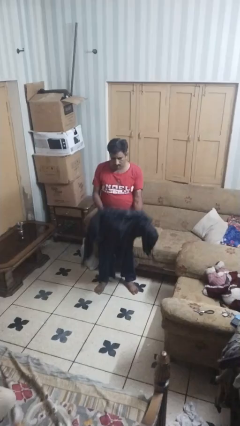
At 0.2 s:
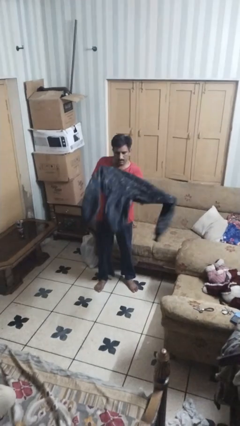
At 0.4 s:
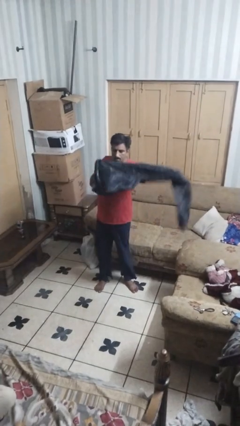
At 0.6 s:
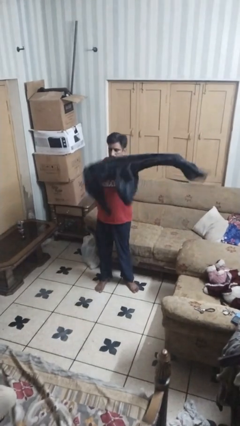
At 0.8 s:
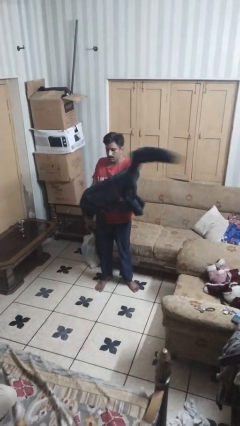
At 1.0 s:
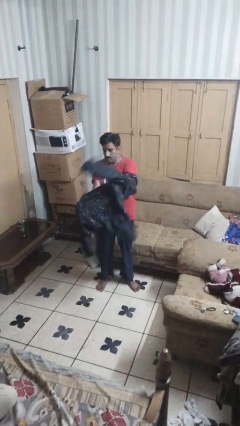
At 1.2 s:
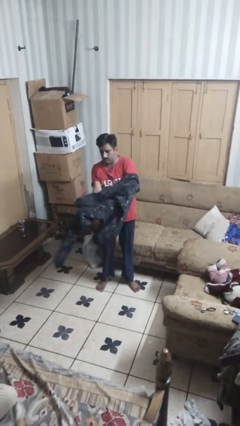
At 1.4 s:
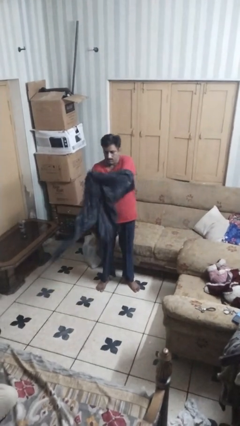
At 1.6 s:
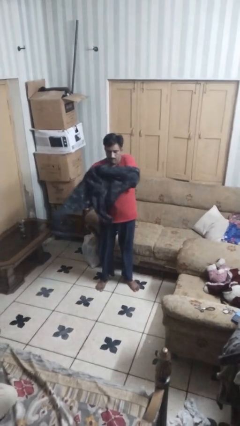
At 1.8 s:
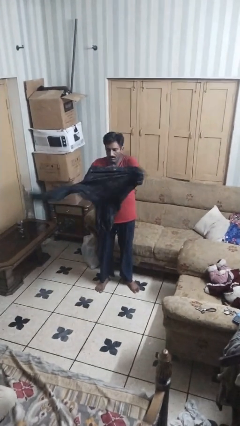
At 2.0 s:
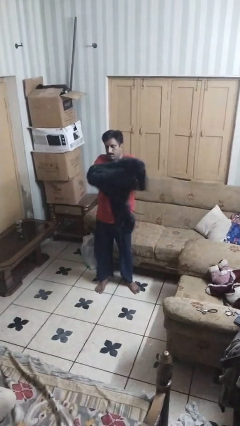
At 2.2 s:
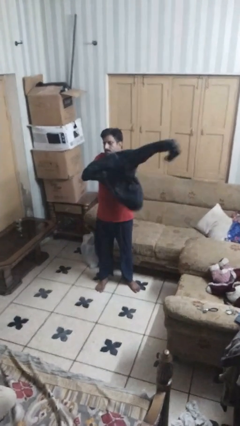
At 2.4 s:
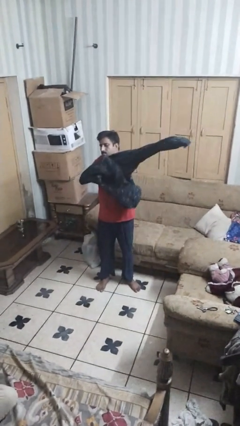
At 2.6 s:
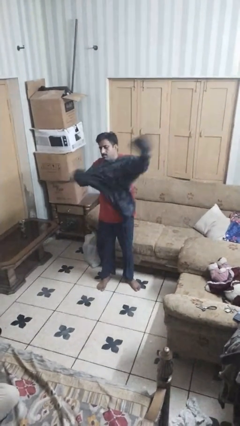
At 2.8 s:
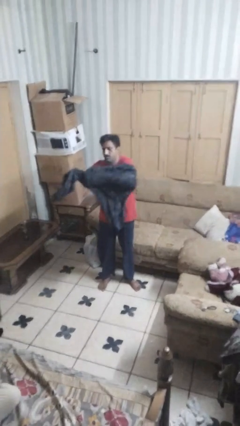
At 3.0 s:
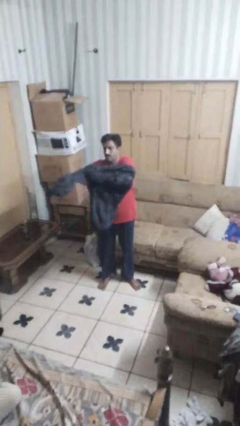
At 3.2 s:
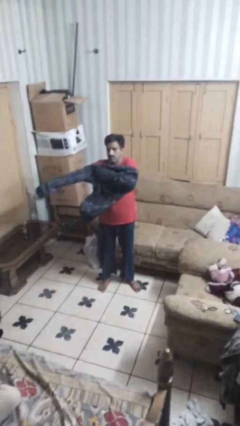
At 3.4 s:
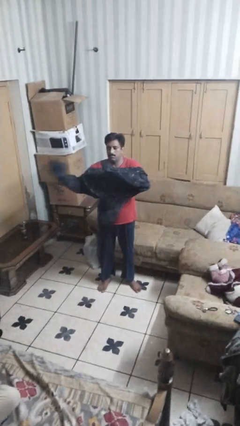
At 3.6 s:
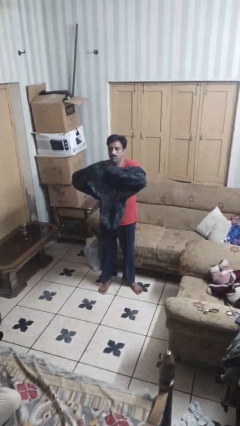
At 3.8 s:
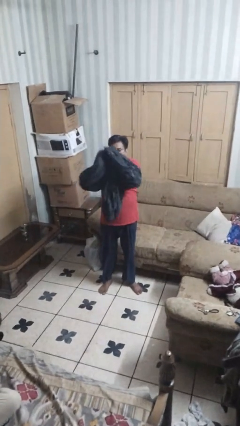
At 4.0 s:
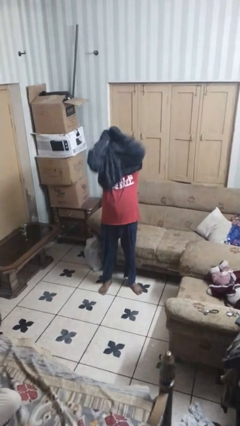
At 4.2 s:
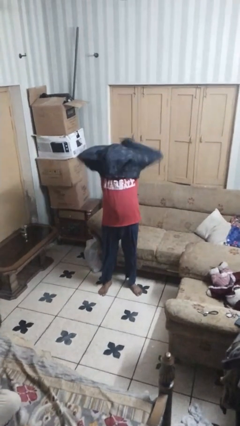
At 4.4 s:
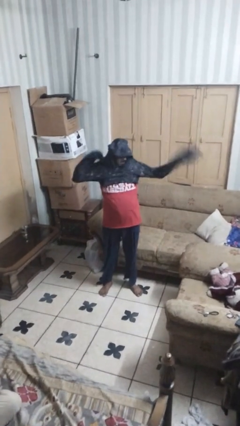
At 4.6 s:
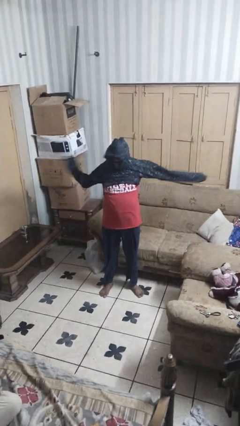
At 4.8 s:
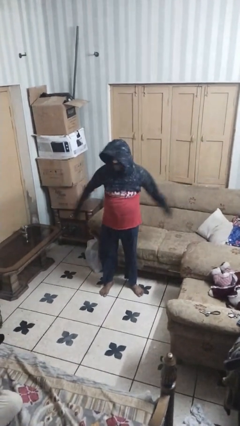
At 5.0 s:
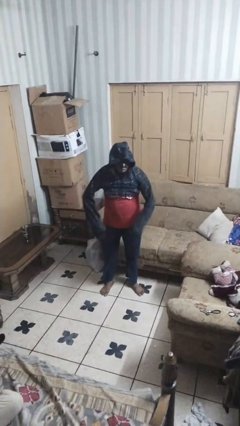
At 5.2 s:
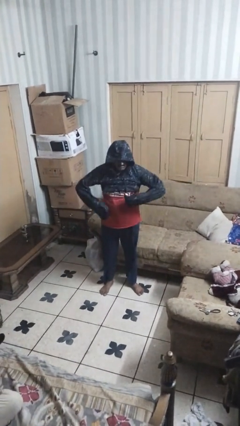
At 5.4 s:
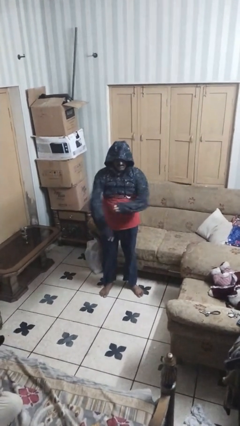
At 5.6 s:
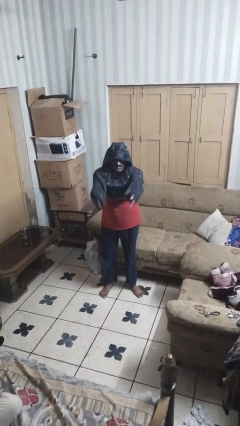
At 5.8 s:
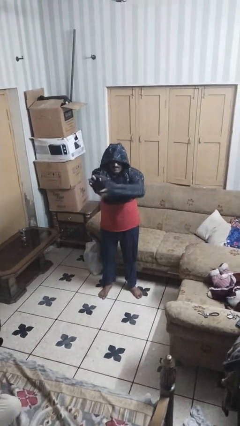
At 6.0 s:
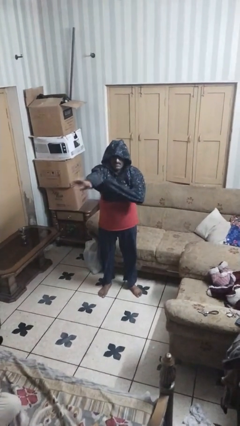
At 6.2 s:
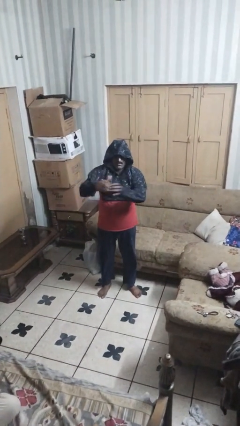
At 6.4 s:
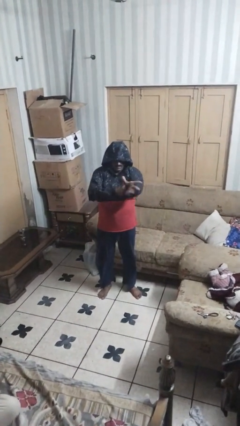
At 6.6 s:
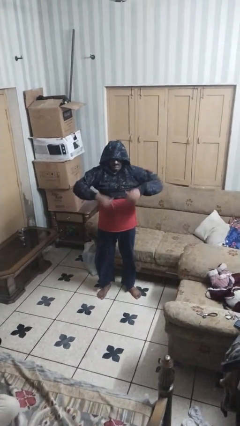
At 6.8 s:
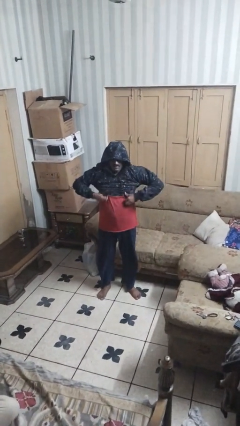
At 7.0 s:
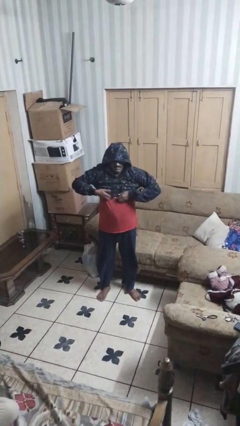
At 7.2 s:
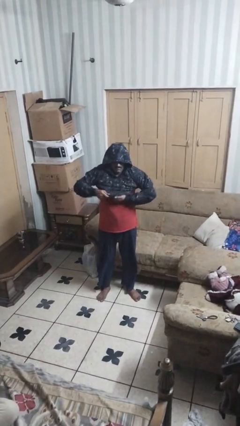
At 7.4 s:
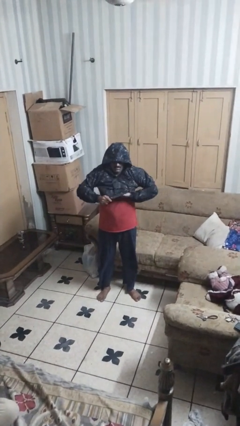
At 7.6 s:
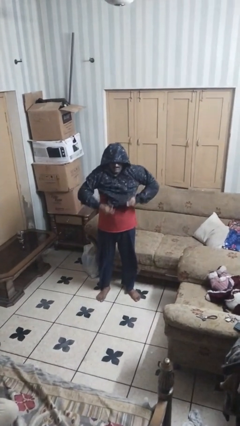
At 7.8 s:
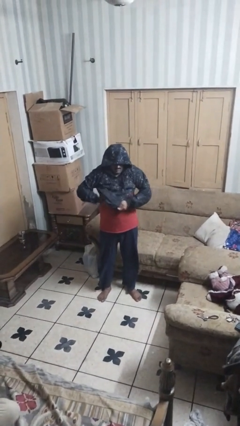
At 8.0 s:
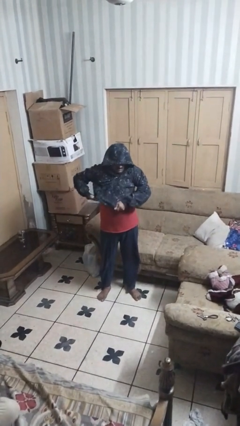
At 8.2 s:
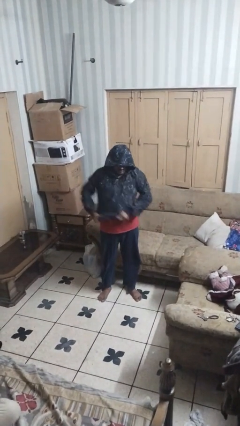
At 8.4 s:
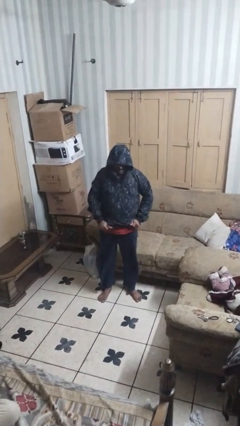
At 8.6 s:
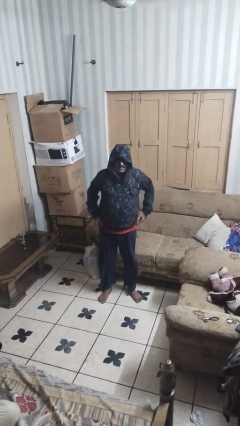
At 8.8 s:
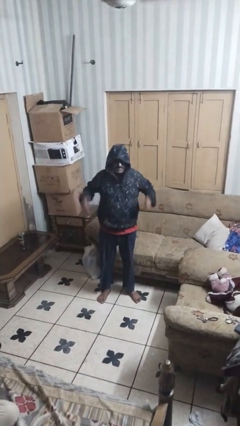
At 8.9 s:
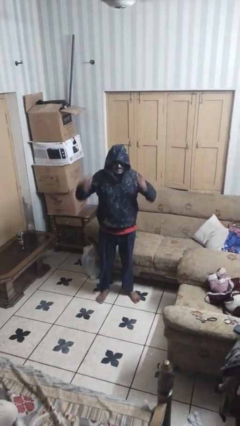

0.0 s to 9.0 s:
person puts on hoodie

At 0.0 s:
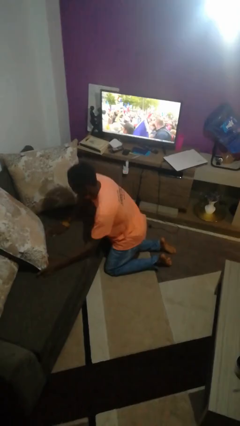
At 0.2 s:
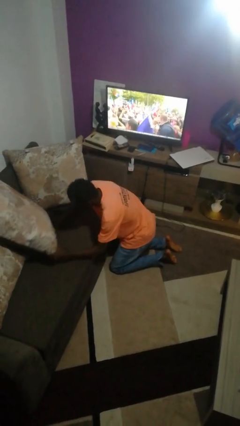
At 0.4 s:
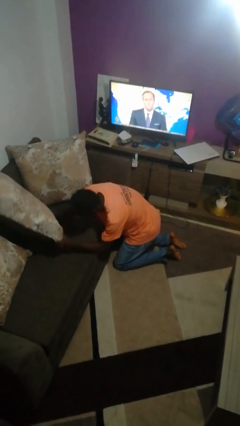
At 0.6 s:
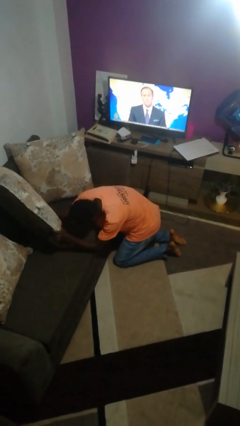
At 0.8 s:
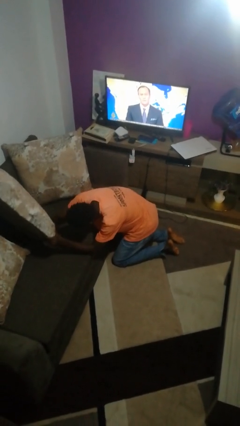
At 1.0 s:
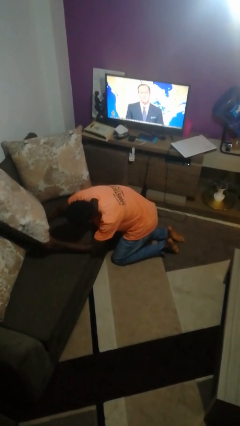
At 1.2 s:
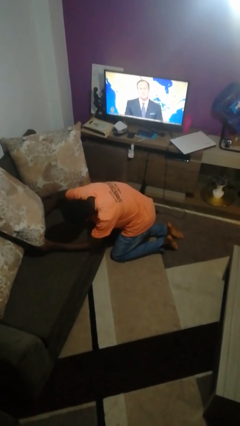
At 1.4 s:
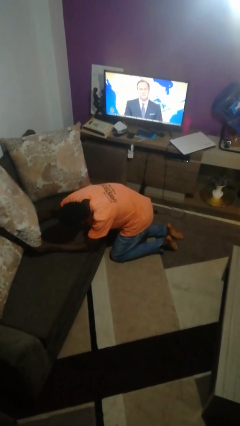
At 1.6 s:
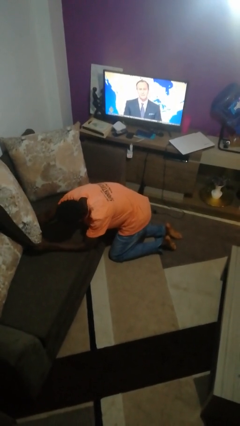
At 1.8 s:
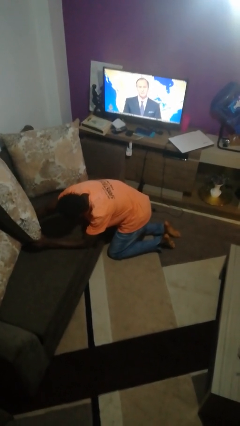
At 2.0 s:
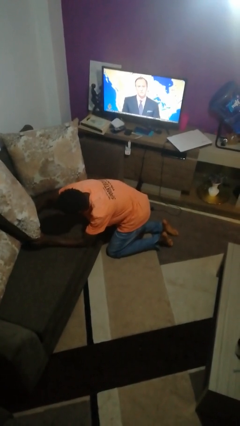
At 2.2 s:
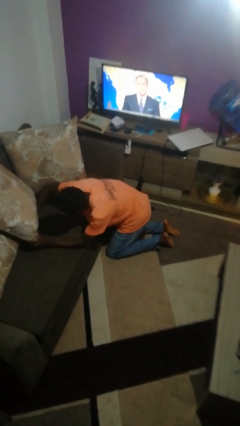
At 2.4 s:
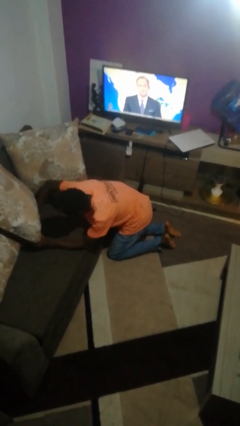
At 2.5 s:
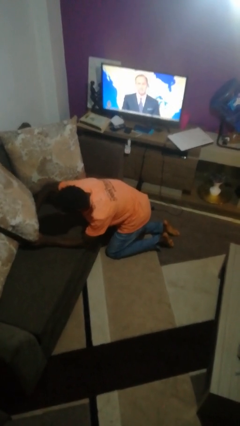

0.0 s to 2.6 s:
person searches in couch

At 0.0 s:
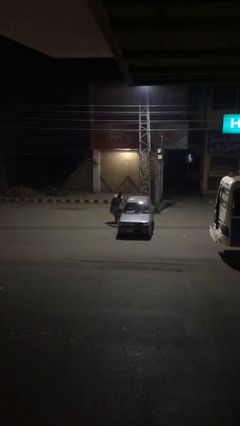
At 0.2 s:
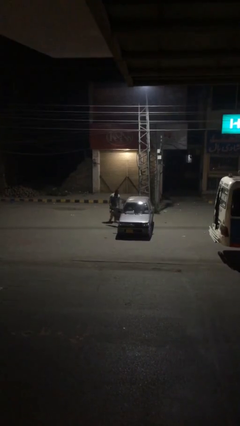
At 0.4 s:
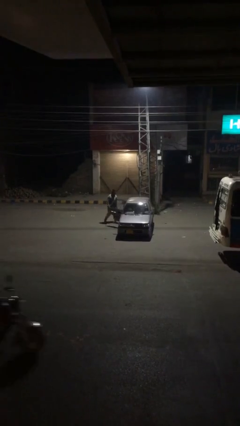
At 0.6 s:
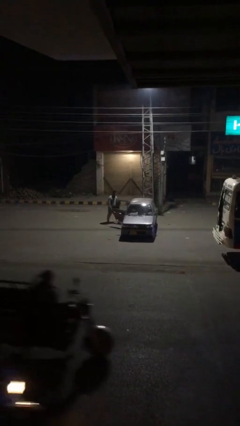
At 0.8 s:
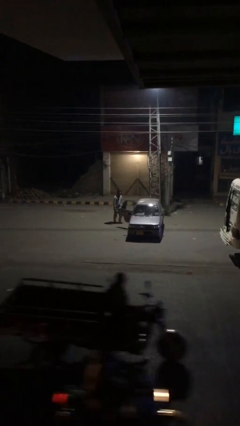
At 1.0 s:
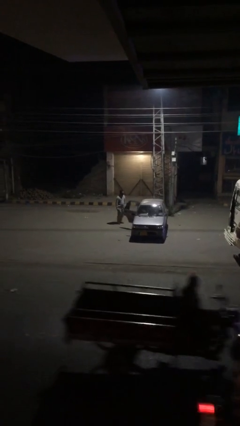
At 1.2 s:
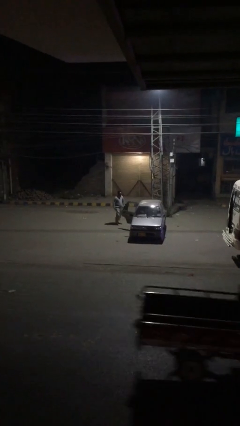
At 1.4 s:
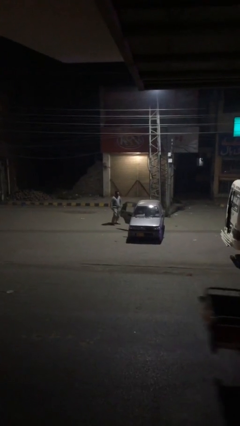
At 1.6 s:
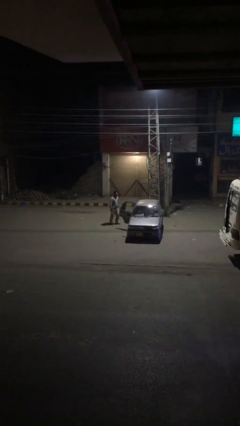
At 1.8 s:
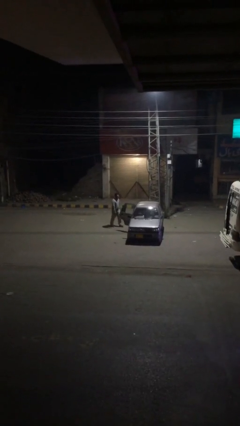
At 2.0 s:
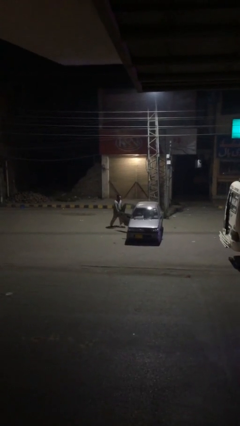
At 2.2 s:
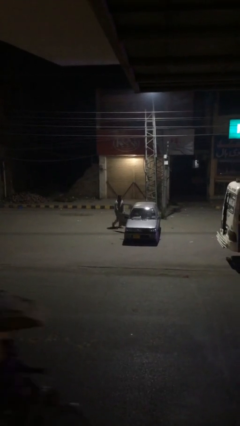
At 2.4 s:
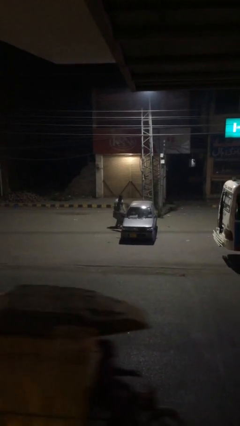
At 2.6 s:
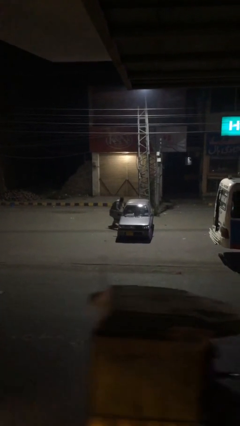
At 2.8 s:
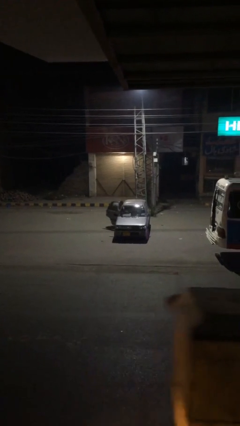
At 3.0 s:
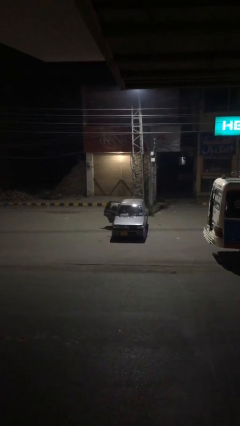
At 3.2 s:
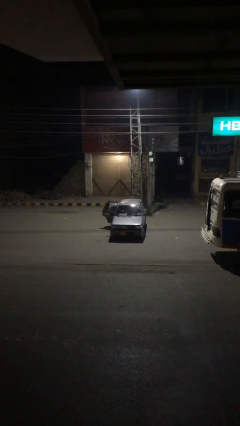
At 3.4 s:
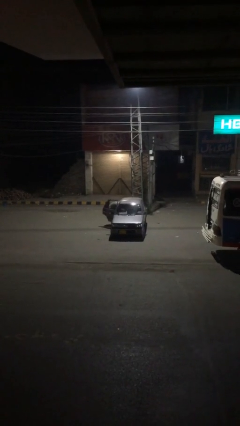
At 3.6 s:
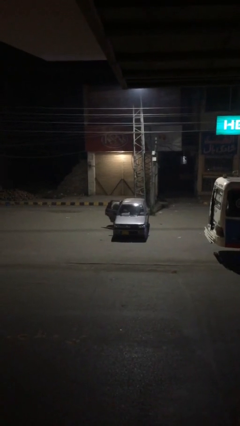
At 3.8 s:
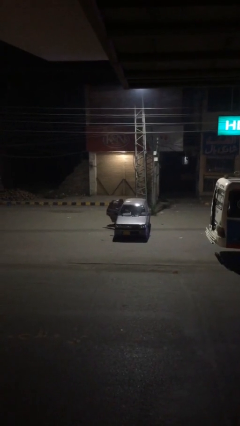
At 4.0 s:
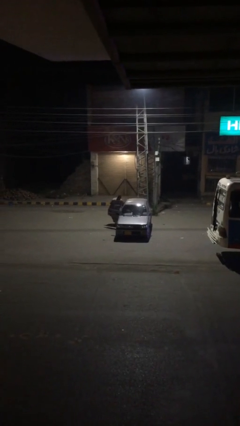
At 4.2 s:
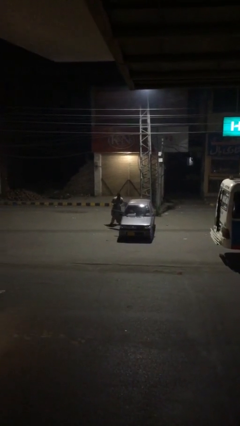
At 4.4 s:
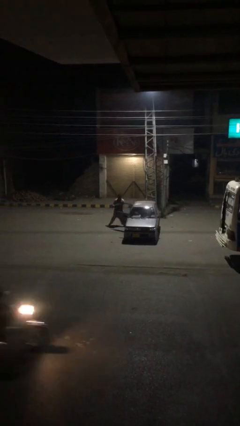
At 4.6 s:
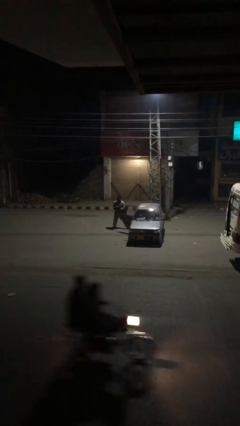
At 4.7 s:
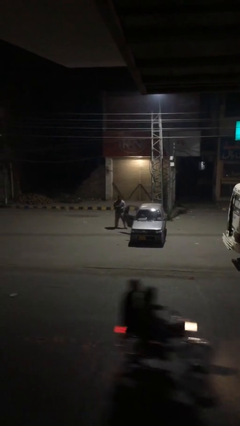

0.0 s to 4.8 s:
person unloads car

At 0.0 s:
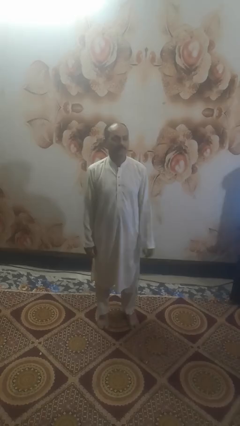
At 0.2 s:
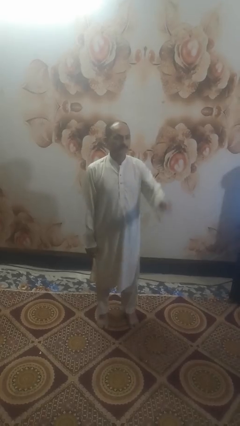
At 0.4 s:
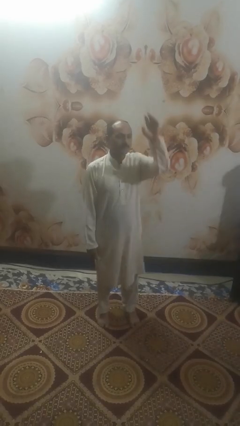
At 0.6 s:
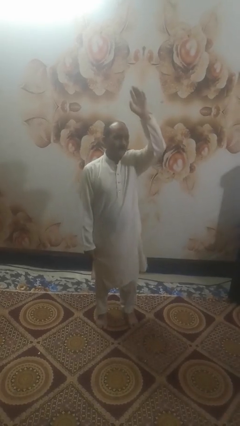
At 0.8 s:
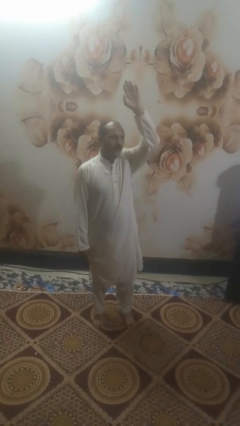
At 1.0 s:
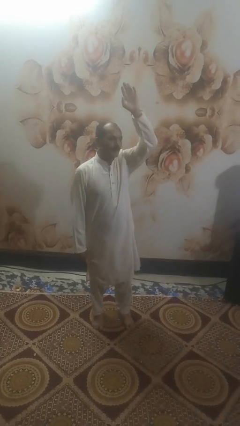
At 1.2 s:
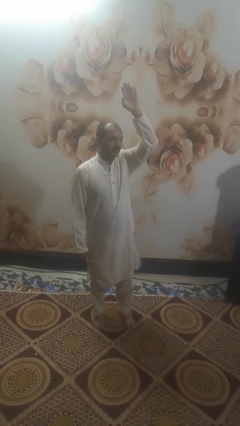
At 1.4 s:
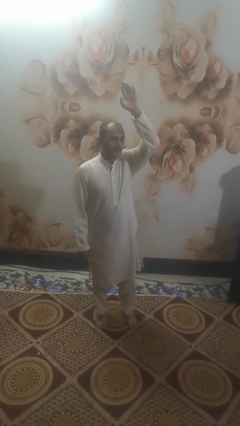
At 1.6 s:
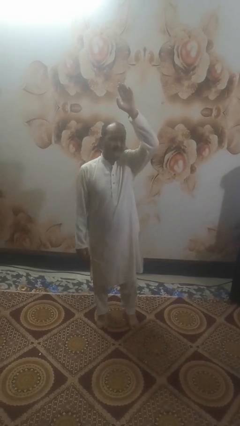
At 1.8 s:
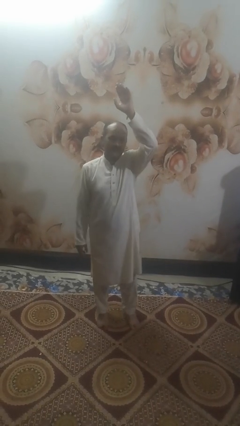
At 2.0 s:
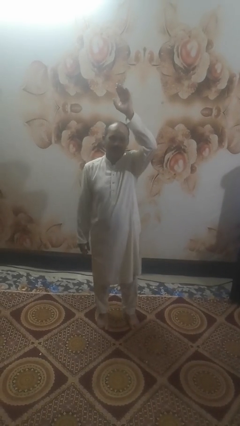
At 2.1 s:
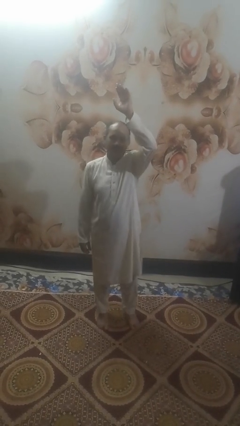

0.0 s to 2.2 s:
person gestures raise hand
